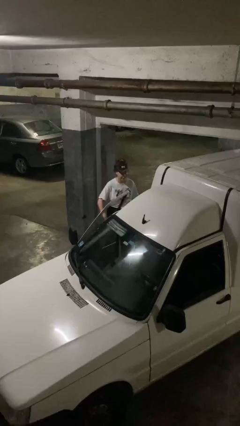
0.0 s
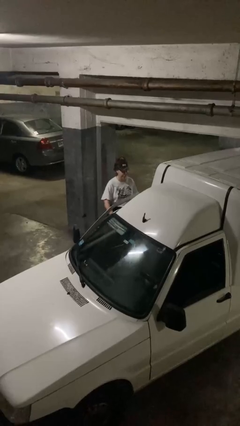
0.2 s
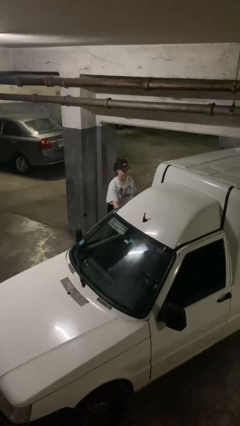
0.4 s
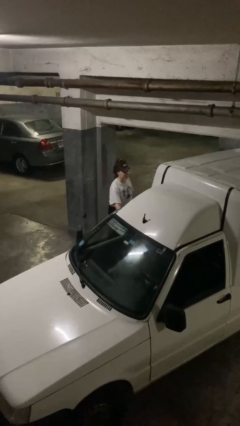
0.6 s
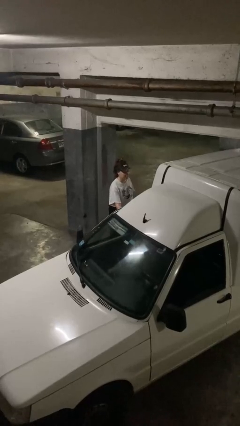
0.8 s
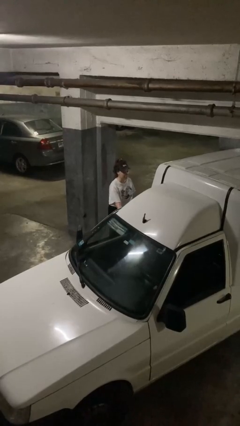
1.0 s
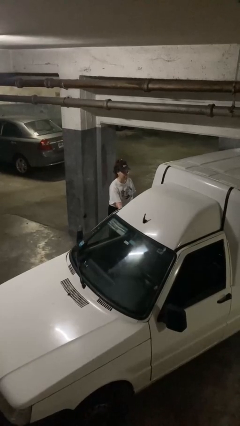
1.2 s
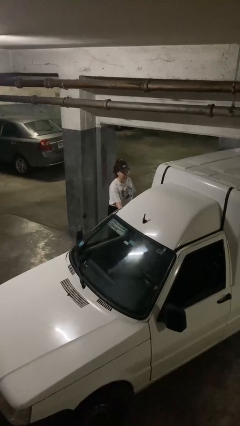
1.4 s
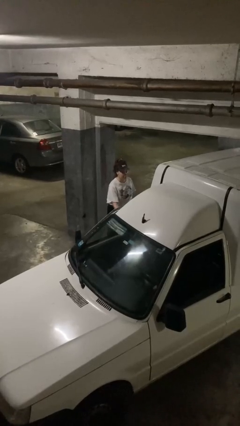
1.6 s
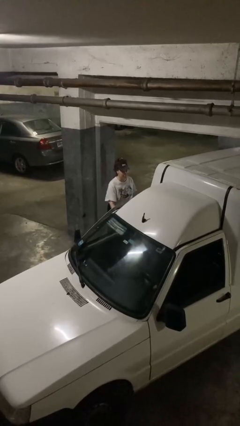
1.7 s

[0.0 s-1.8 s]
person closes car door

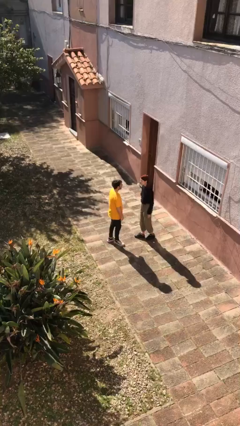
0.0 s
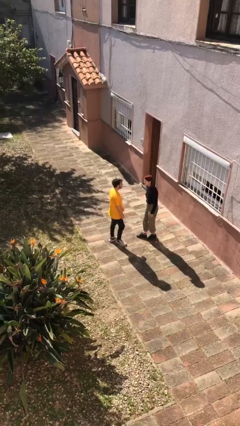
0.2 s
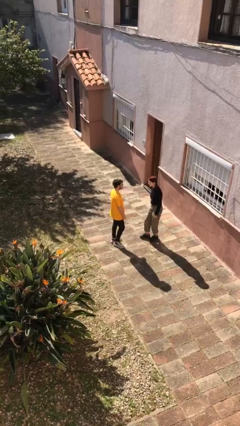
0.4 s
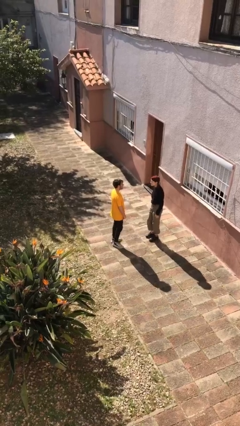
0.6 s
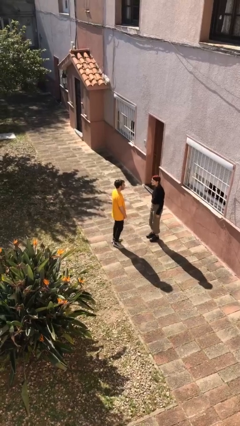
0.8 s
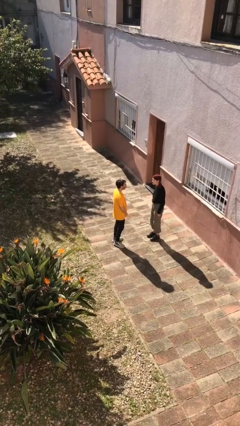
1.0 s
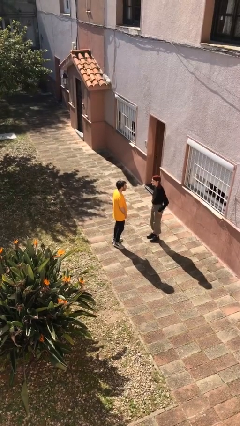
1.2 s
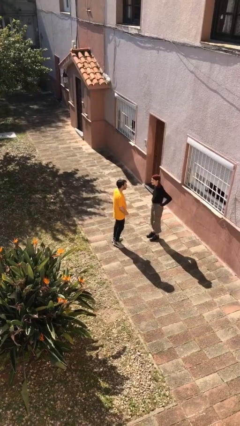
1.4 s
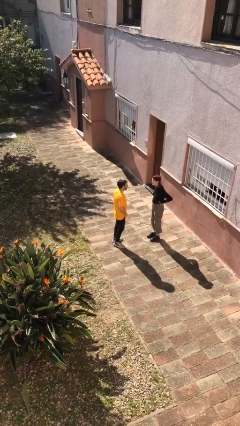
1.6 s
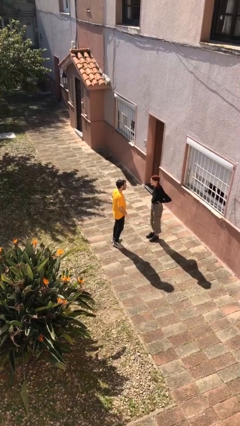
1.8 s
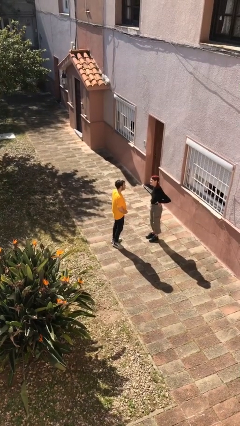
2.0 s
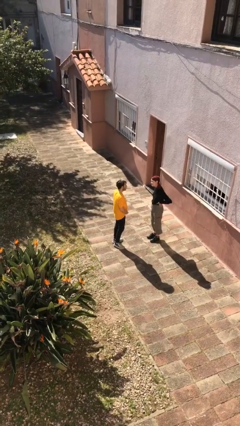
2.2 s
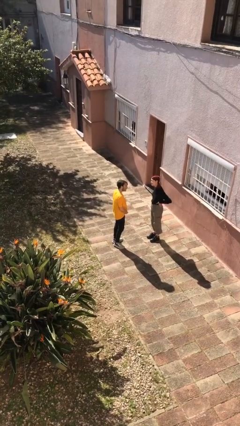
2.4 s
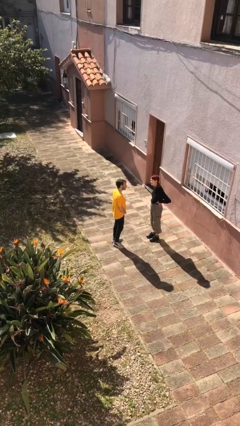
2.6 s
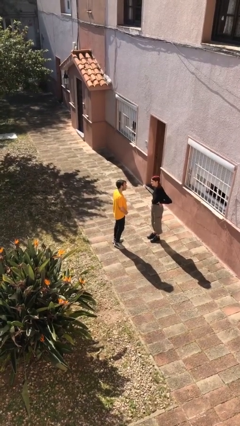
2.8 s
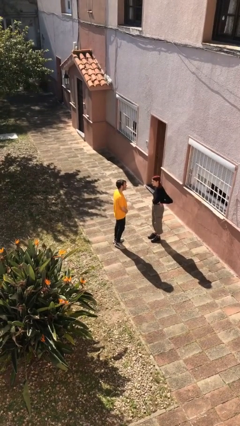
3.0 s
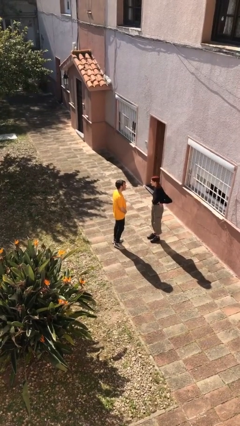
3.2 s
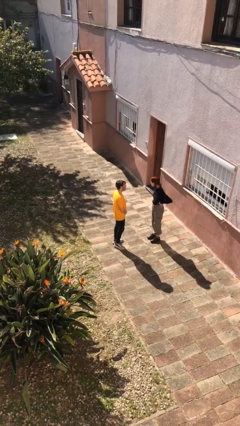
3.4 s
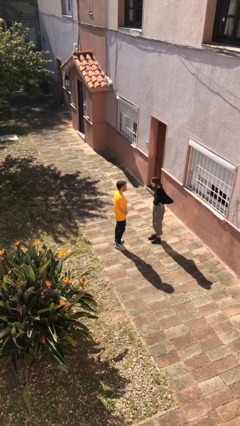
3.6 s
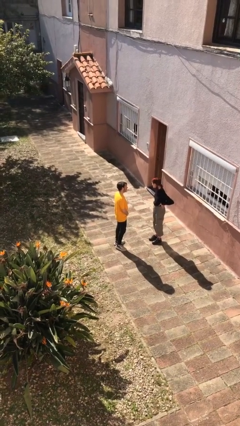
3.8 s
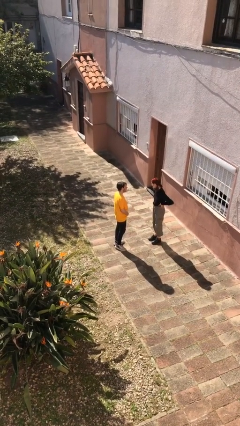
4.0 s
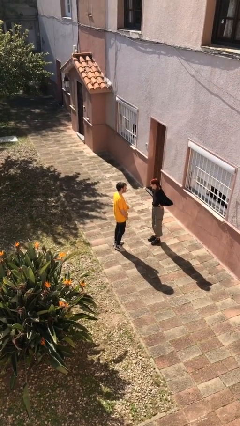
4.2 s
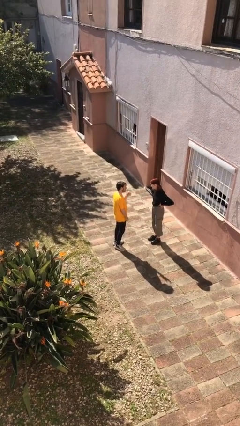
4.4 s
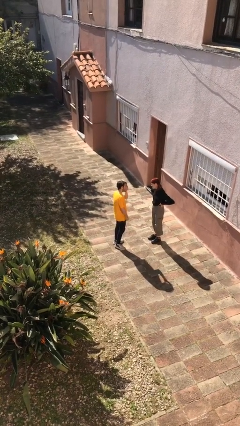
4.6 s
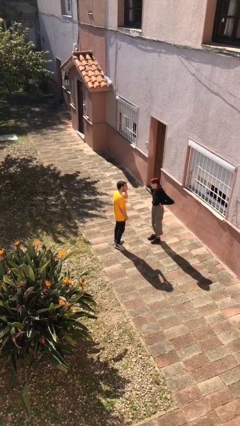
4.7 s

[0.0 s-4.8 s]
person talks to person

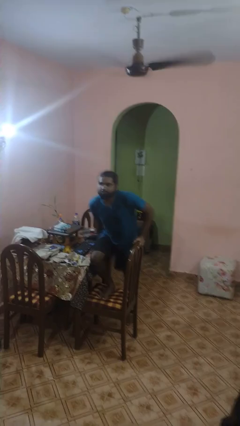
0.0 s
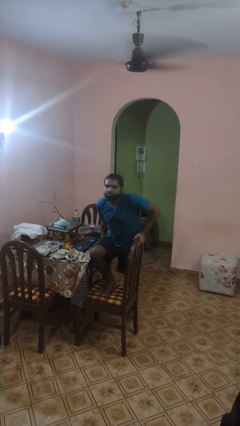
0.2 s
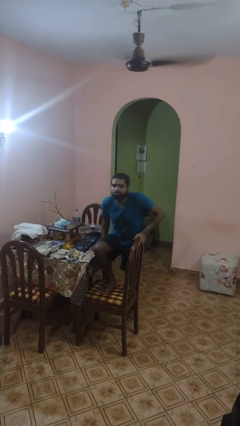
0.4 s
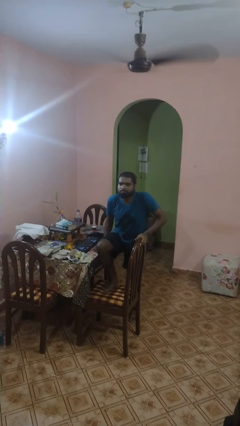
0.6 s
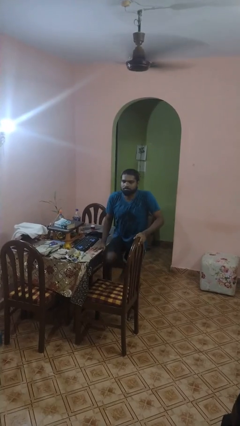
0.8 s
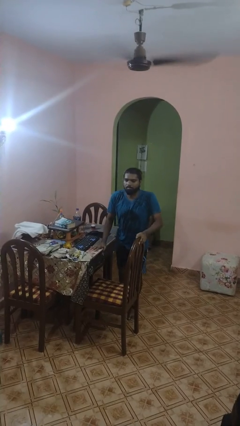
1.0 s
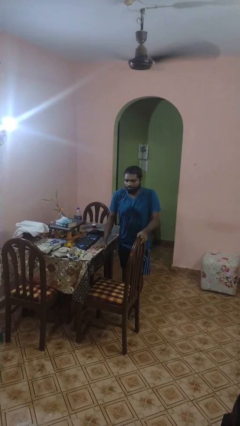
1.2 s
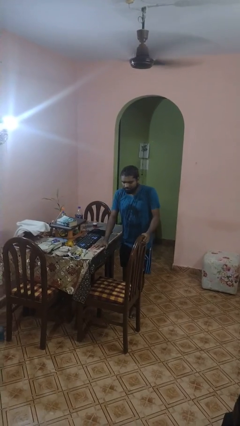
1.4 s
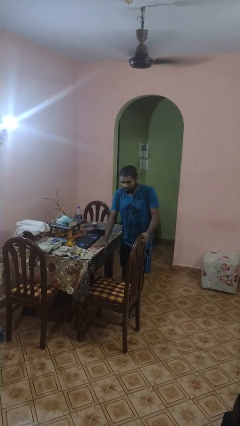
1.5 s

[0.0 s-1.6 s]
person climbs off chair

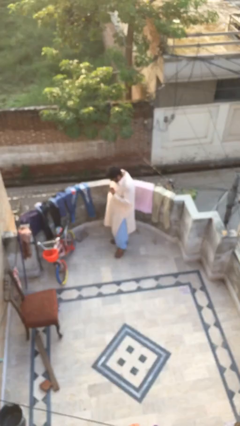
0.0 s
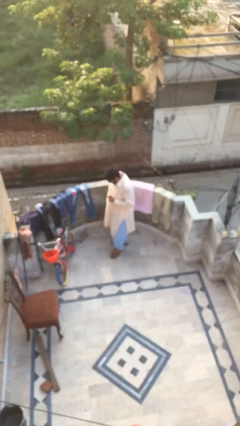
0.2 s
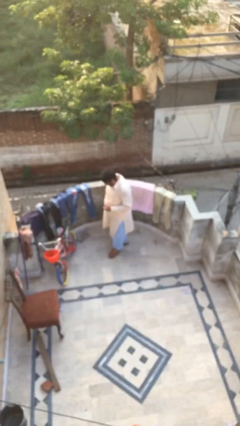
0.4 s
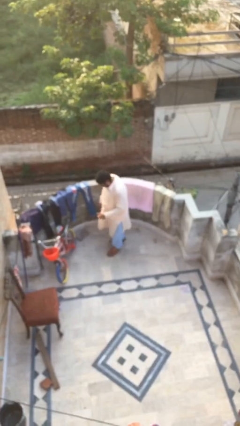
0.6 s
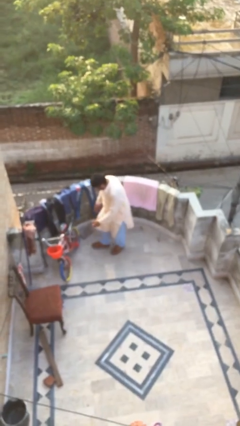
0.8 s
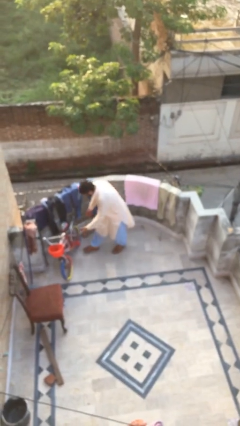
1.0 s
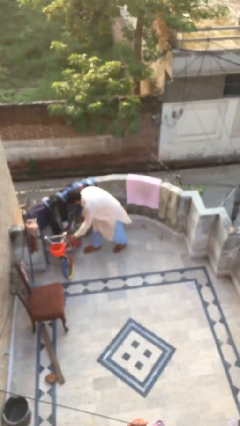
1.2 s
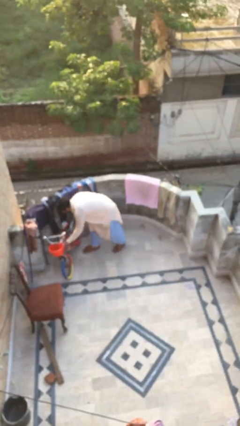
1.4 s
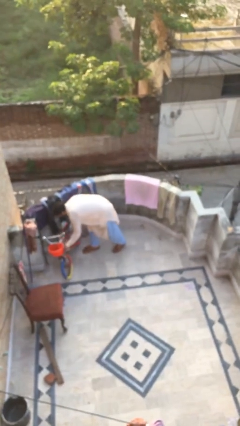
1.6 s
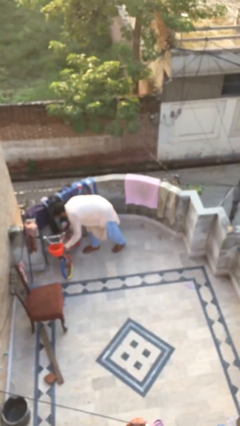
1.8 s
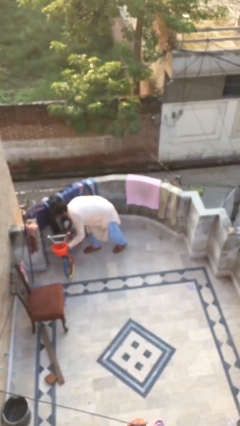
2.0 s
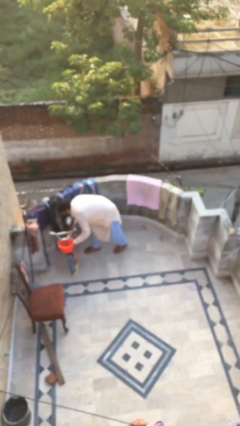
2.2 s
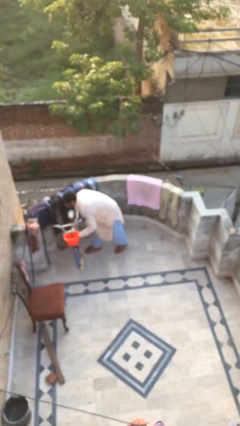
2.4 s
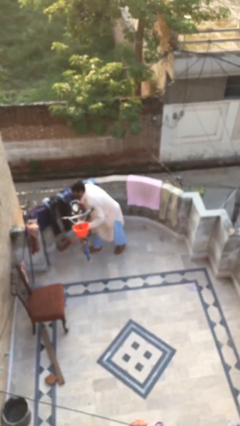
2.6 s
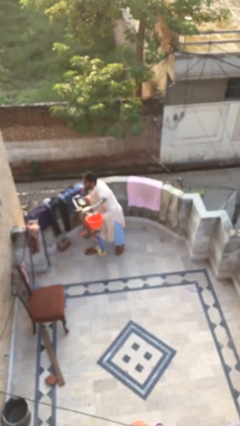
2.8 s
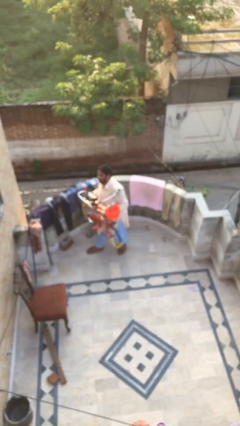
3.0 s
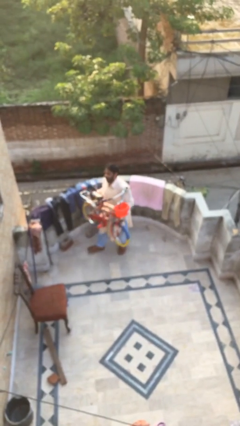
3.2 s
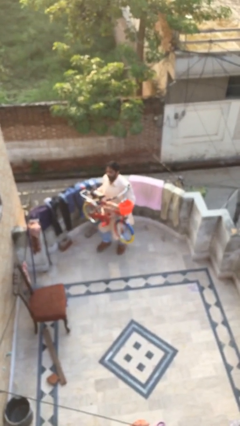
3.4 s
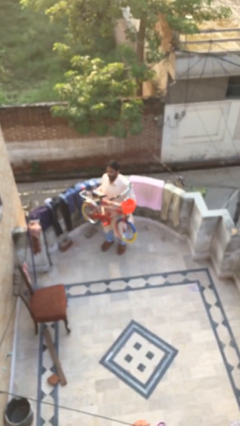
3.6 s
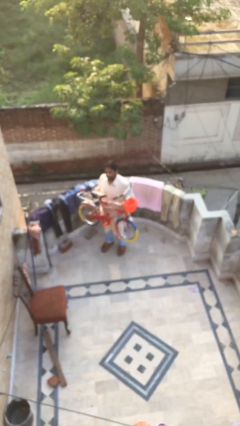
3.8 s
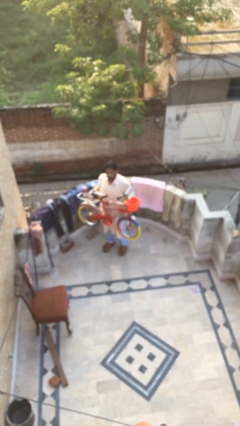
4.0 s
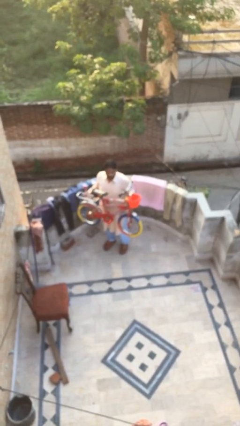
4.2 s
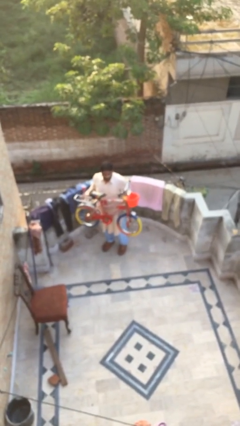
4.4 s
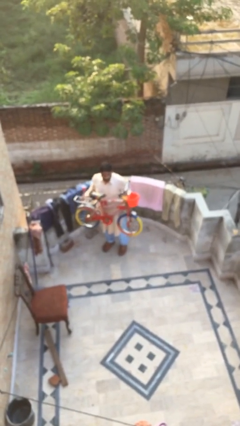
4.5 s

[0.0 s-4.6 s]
person picks up object from floor

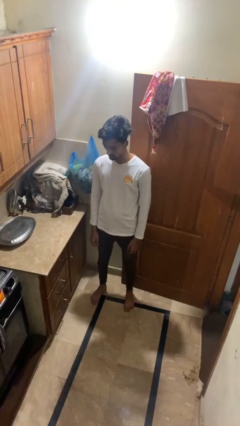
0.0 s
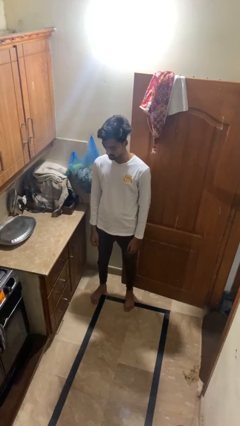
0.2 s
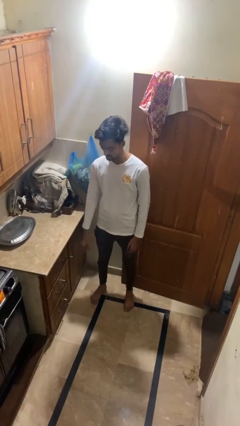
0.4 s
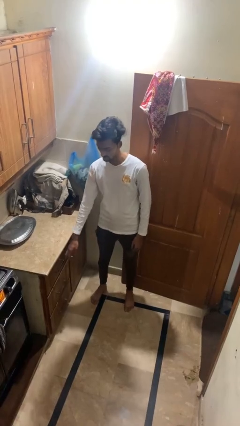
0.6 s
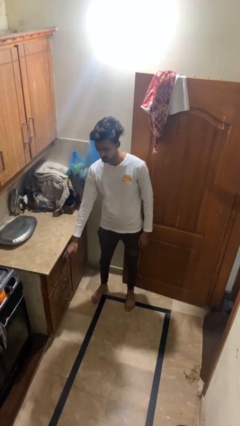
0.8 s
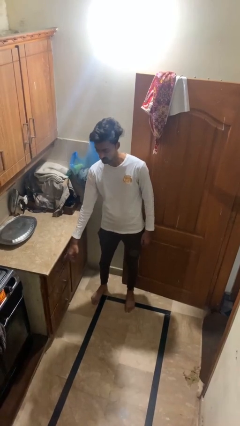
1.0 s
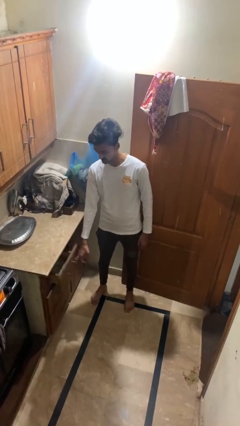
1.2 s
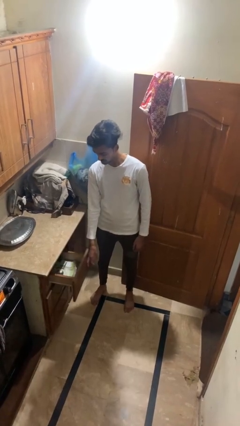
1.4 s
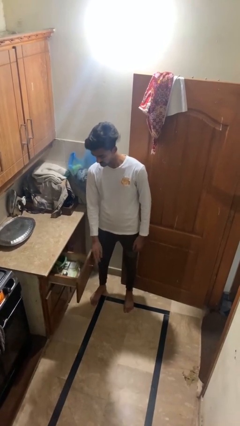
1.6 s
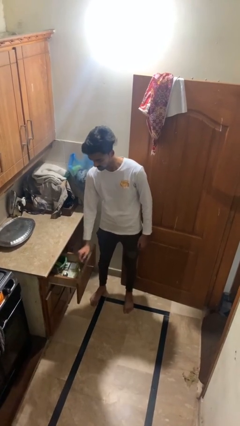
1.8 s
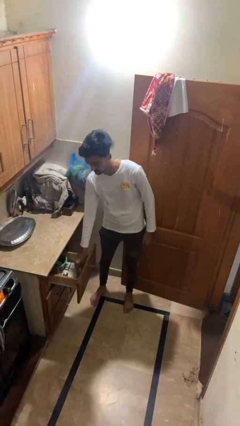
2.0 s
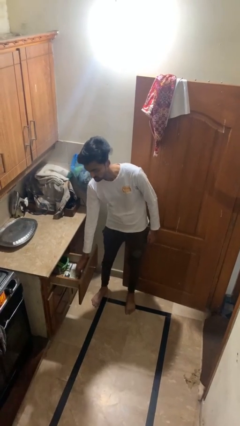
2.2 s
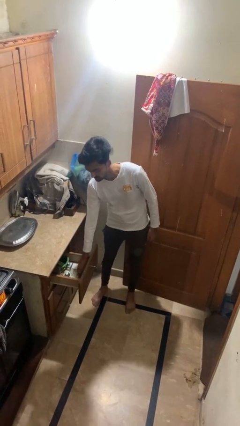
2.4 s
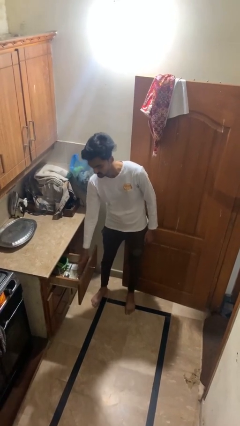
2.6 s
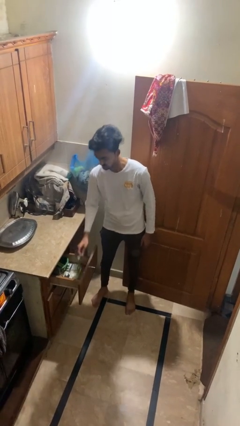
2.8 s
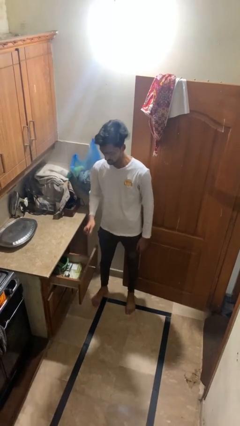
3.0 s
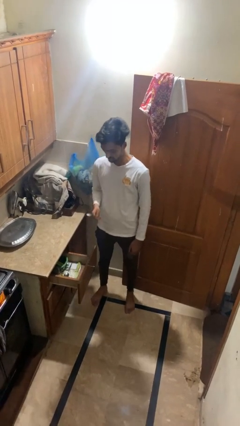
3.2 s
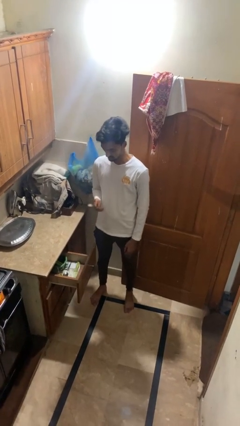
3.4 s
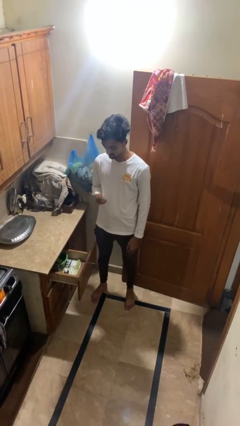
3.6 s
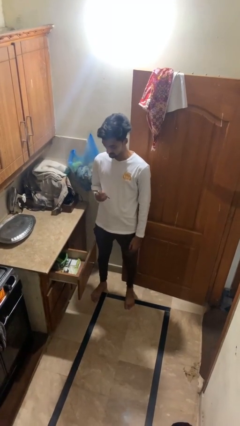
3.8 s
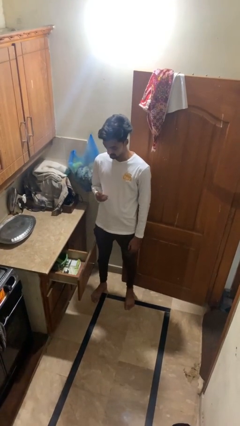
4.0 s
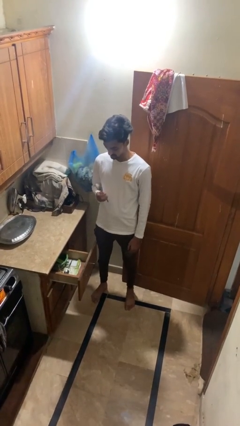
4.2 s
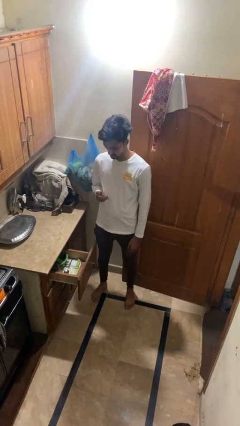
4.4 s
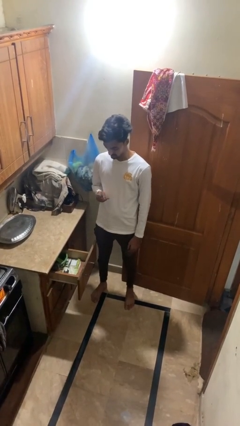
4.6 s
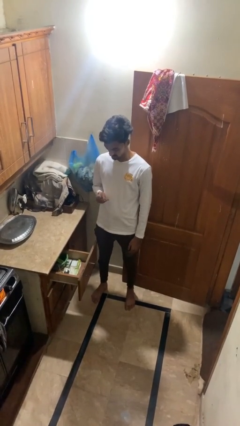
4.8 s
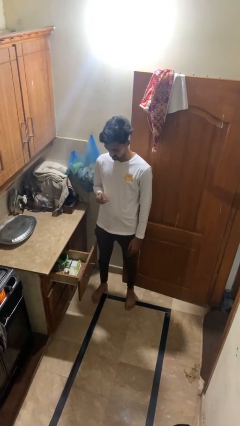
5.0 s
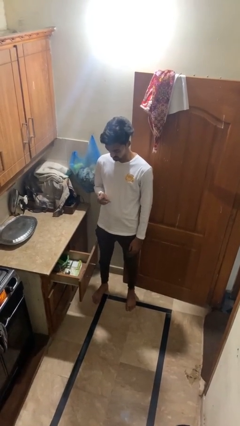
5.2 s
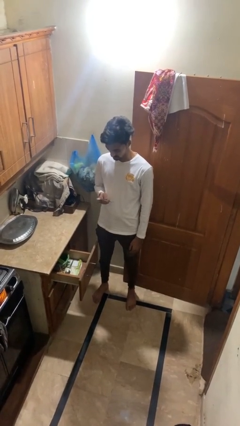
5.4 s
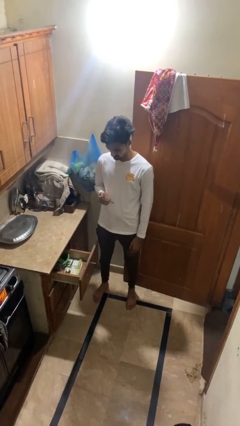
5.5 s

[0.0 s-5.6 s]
person takes object from kitchen drawer
